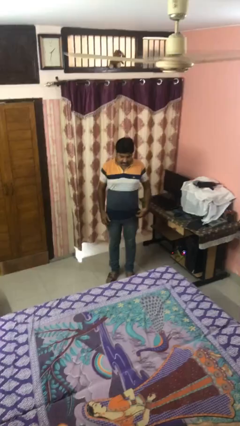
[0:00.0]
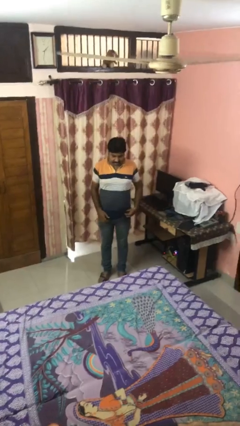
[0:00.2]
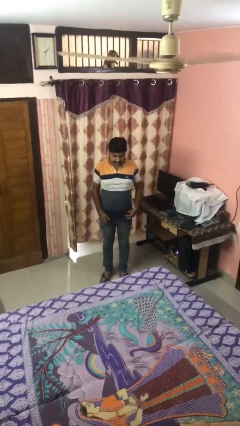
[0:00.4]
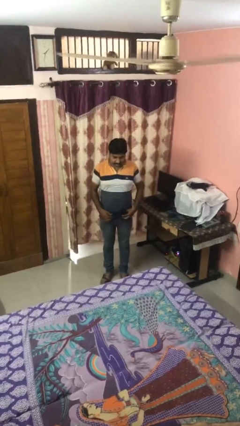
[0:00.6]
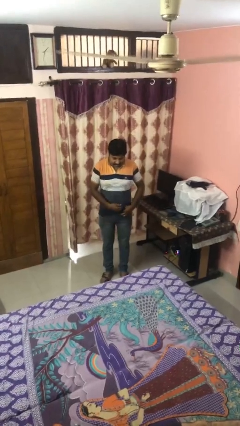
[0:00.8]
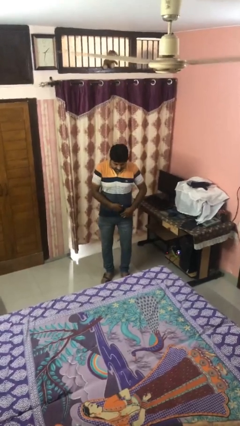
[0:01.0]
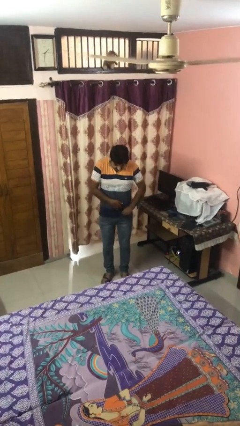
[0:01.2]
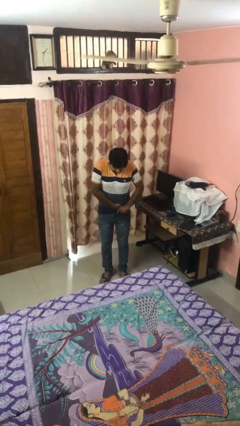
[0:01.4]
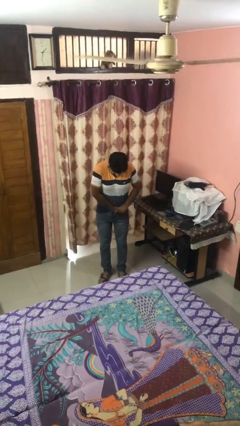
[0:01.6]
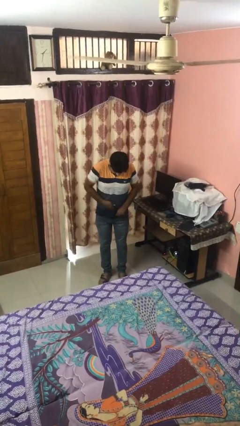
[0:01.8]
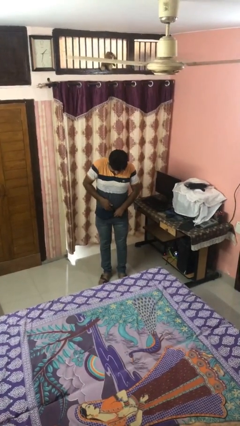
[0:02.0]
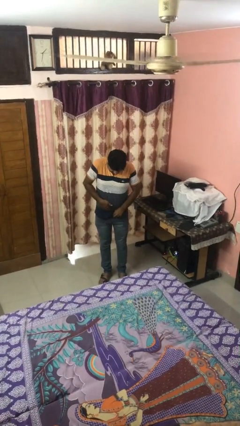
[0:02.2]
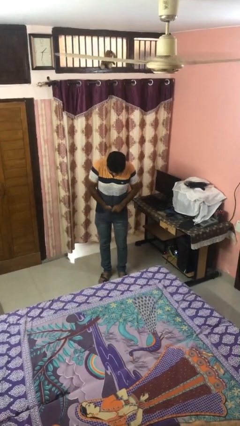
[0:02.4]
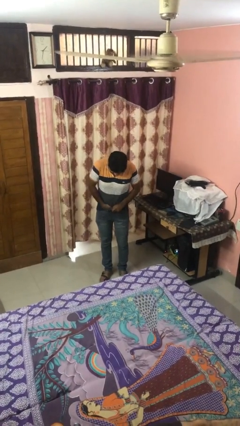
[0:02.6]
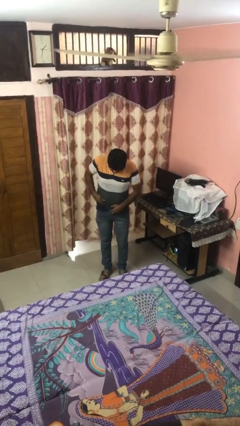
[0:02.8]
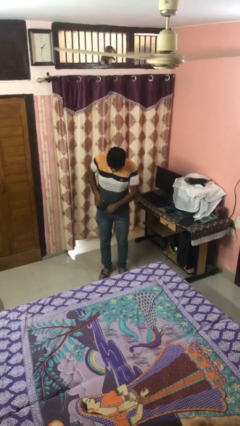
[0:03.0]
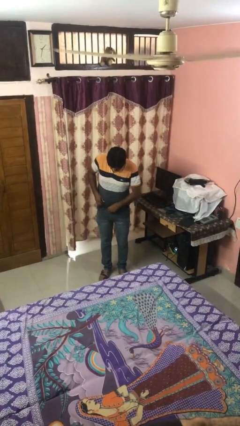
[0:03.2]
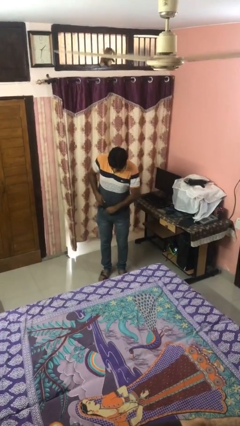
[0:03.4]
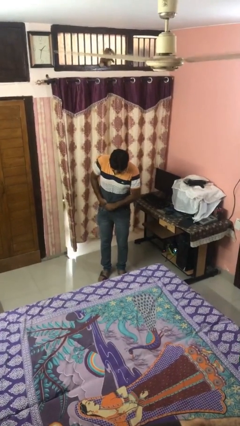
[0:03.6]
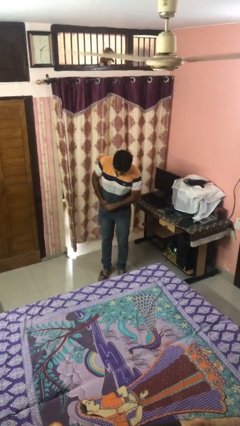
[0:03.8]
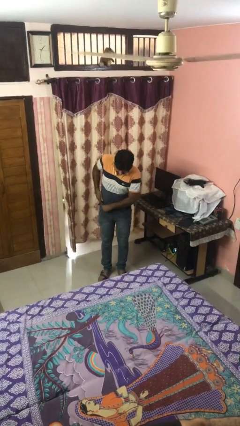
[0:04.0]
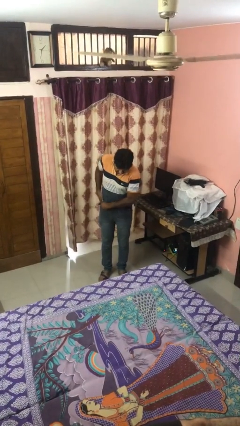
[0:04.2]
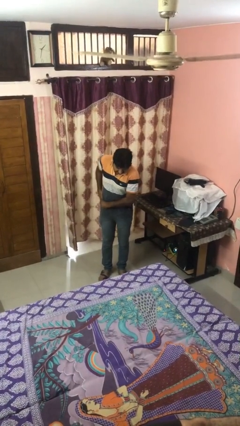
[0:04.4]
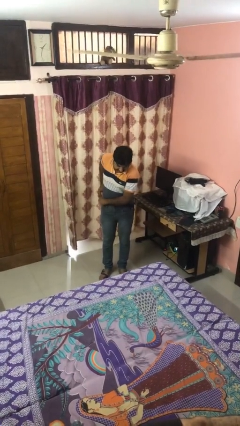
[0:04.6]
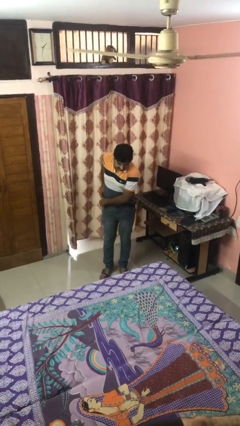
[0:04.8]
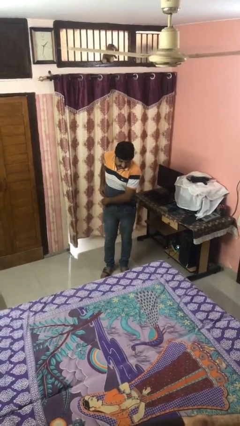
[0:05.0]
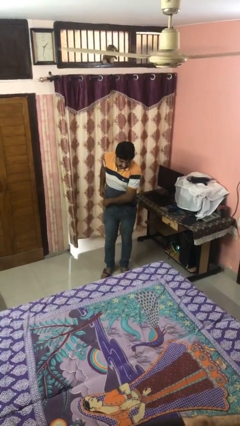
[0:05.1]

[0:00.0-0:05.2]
person tucks in shirt

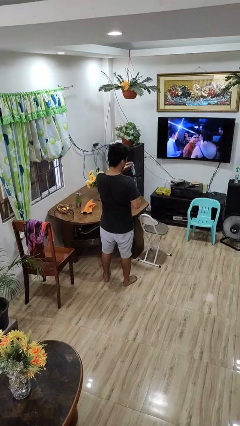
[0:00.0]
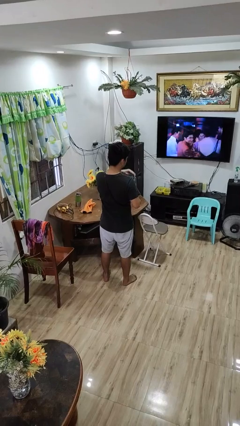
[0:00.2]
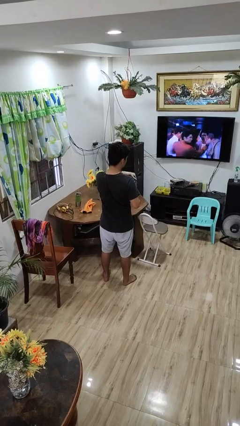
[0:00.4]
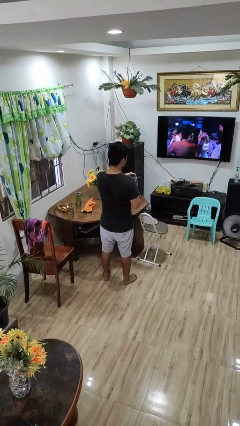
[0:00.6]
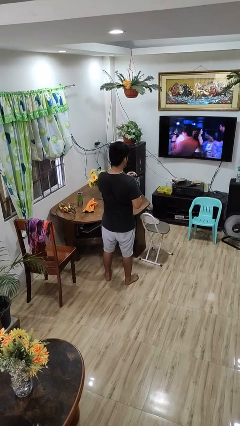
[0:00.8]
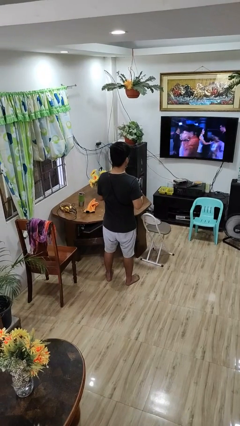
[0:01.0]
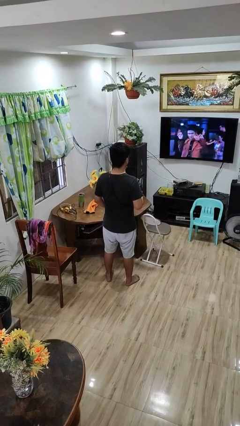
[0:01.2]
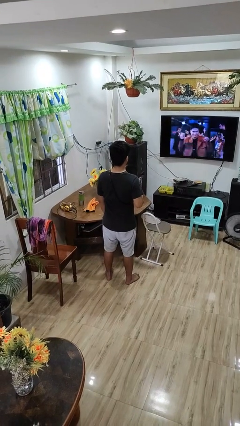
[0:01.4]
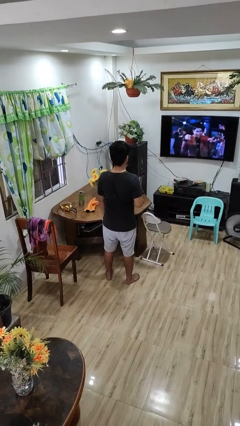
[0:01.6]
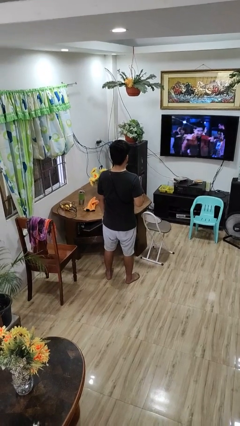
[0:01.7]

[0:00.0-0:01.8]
person puts object into purse

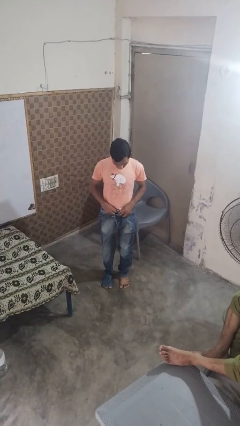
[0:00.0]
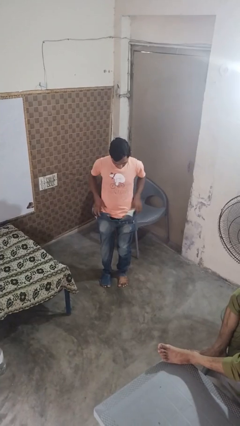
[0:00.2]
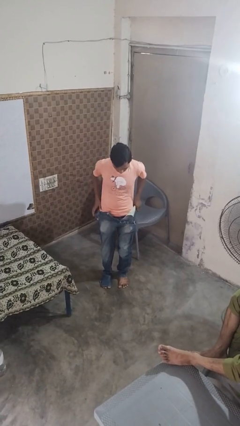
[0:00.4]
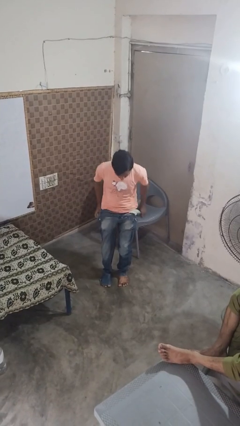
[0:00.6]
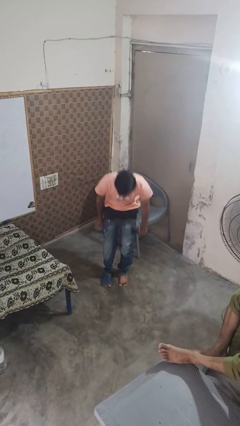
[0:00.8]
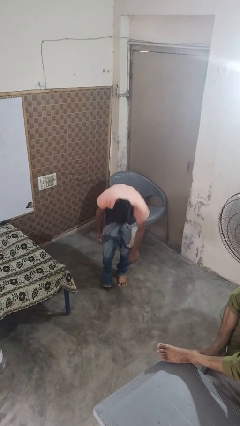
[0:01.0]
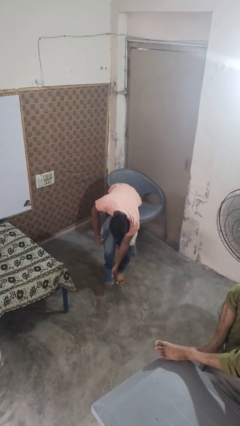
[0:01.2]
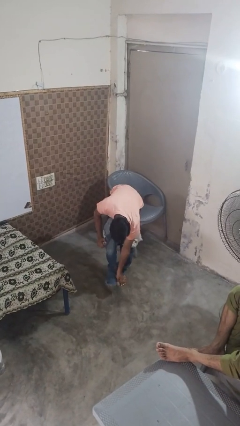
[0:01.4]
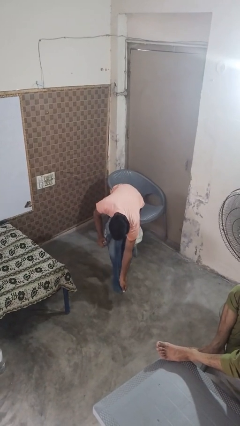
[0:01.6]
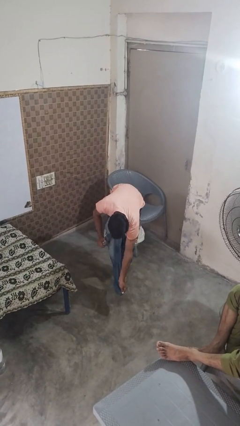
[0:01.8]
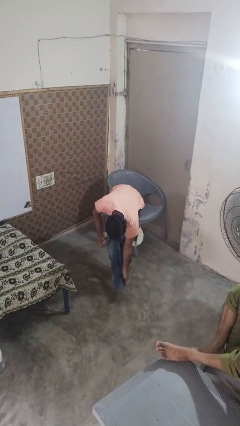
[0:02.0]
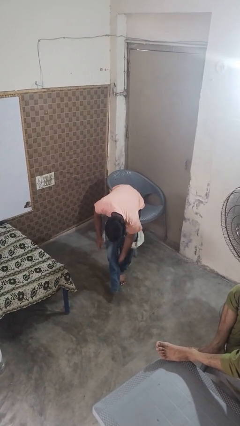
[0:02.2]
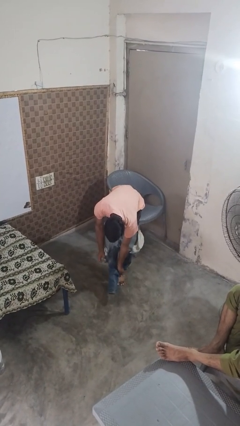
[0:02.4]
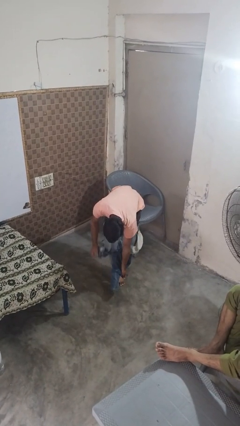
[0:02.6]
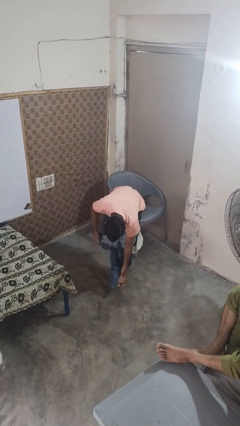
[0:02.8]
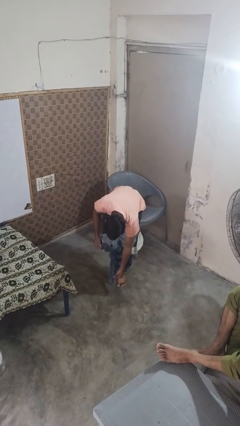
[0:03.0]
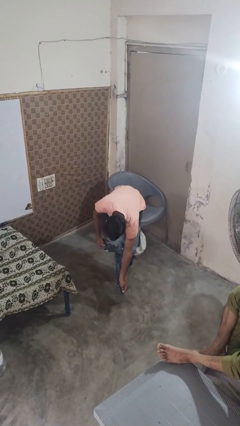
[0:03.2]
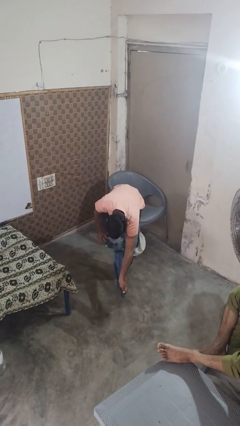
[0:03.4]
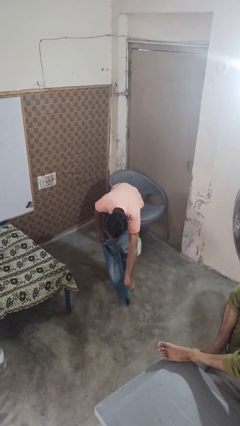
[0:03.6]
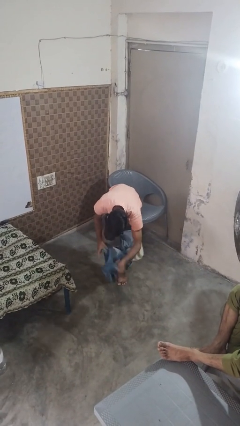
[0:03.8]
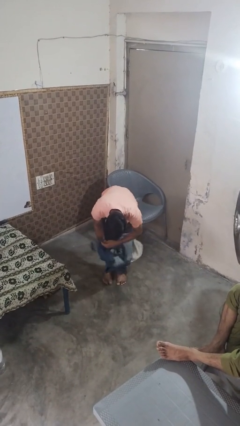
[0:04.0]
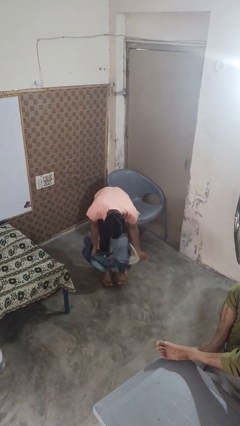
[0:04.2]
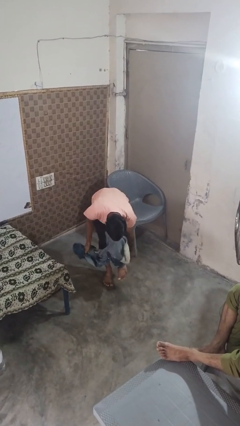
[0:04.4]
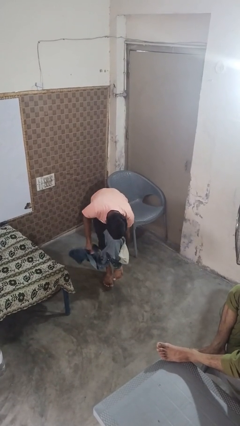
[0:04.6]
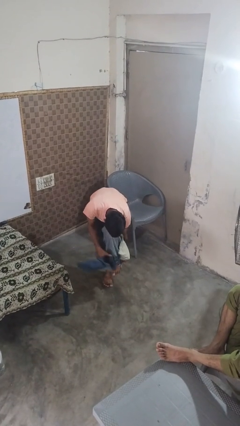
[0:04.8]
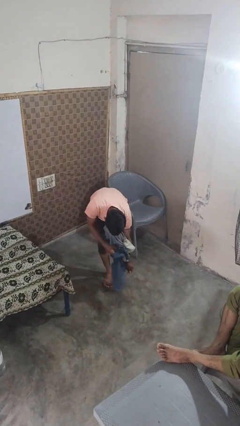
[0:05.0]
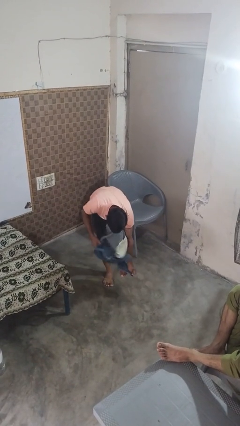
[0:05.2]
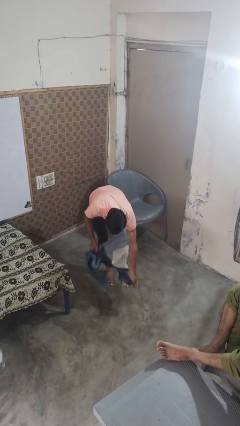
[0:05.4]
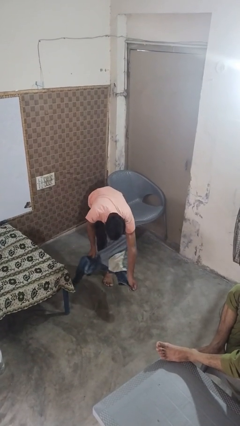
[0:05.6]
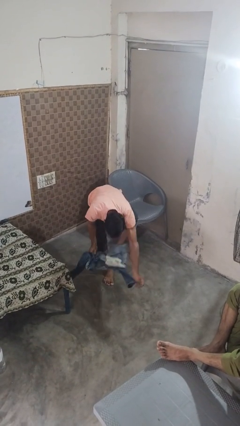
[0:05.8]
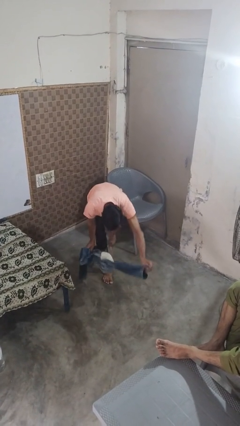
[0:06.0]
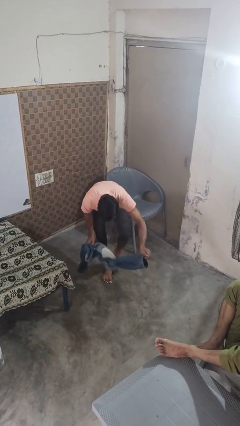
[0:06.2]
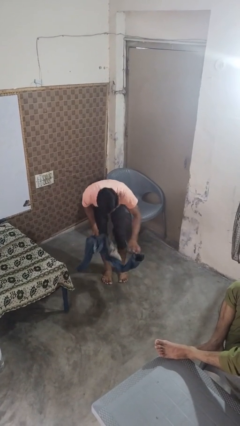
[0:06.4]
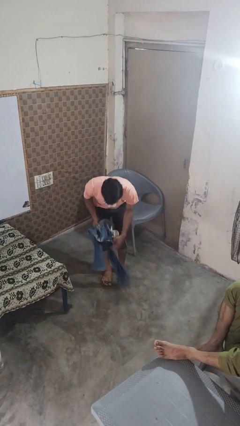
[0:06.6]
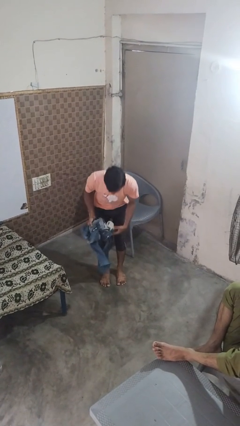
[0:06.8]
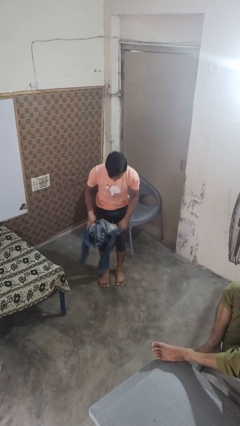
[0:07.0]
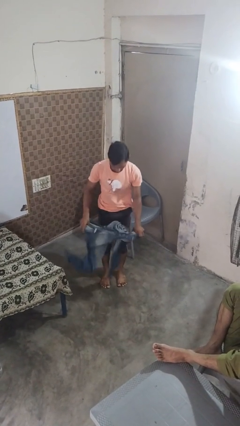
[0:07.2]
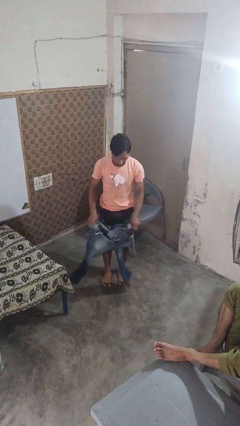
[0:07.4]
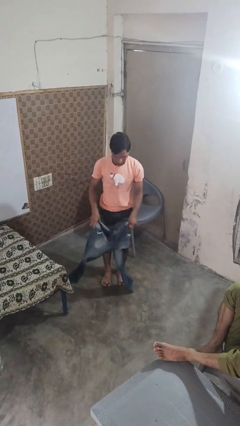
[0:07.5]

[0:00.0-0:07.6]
person takes off pants

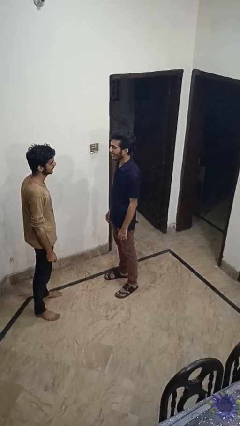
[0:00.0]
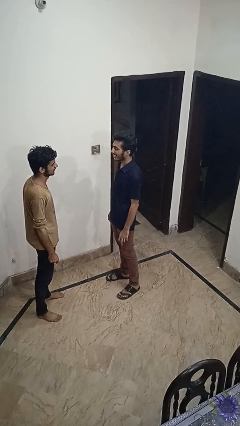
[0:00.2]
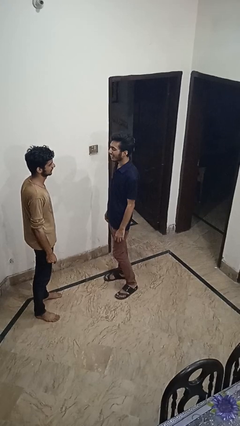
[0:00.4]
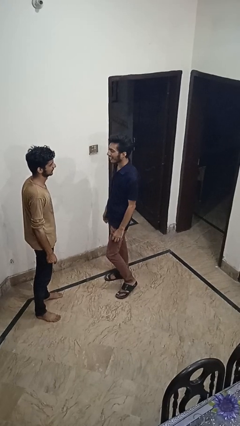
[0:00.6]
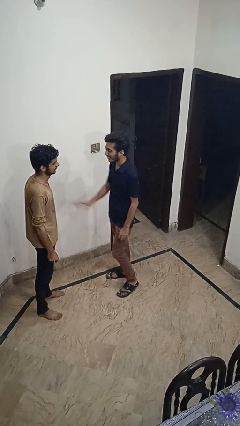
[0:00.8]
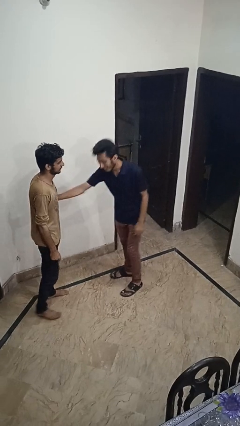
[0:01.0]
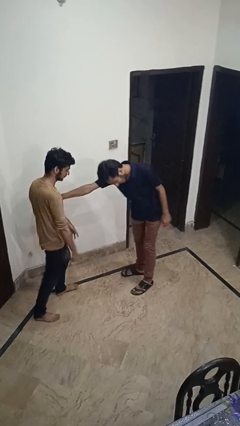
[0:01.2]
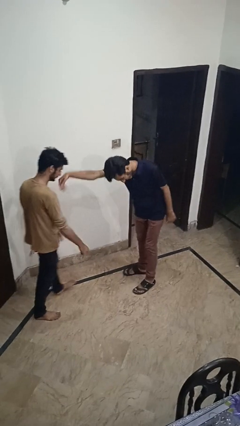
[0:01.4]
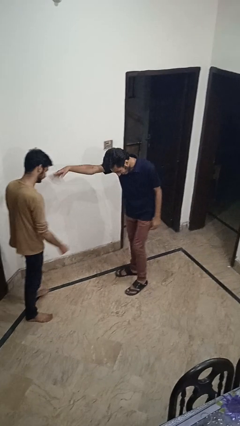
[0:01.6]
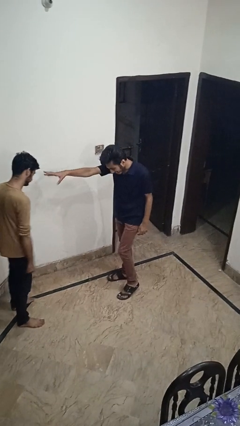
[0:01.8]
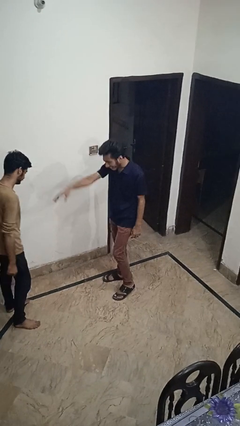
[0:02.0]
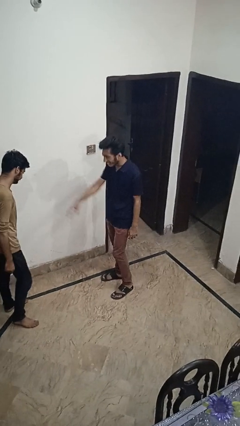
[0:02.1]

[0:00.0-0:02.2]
person shoves person

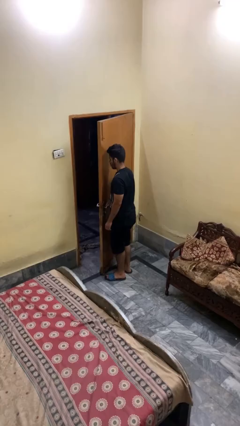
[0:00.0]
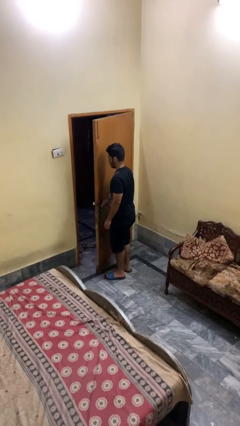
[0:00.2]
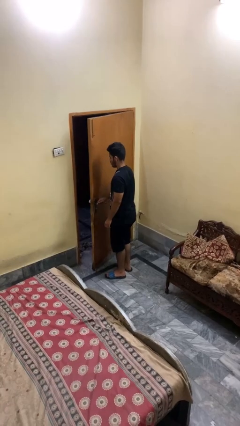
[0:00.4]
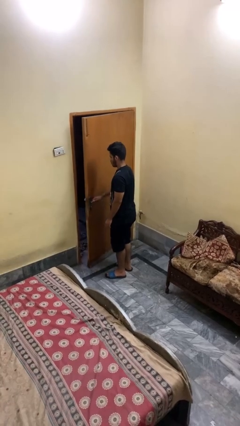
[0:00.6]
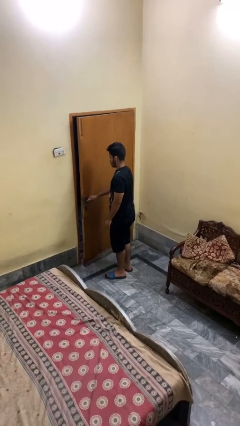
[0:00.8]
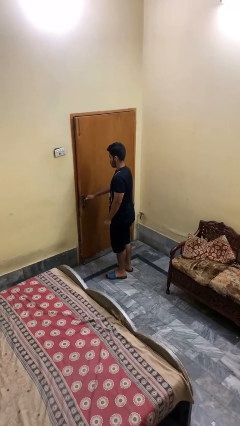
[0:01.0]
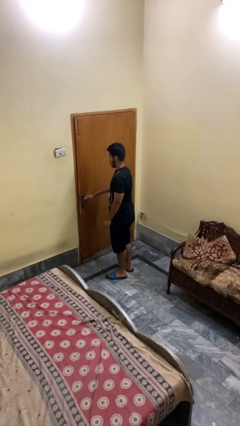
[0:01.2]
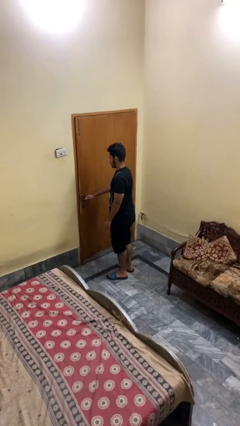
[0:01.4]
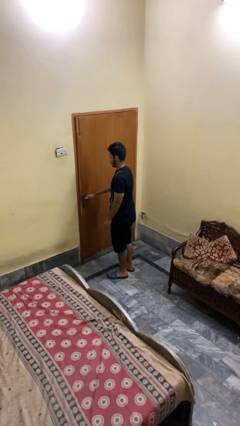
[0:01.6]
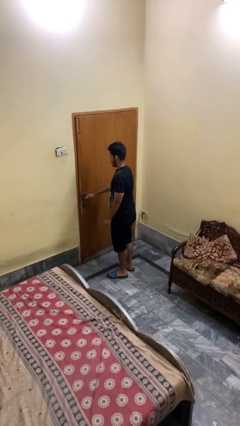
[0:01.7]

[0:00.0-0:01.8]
person closes facility door
